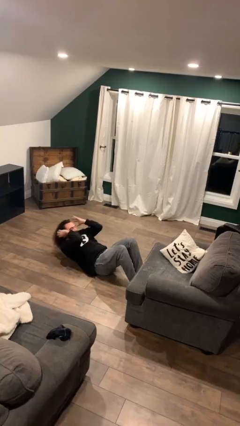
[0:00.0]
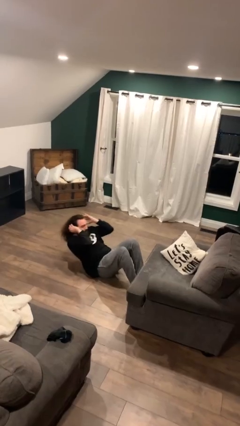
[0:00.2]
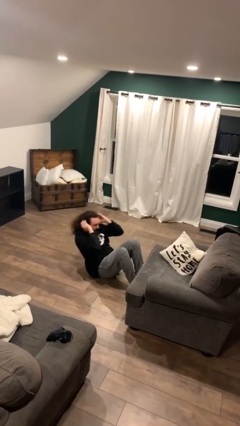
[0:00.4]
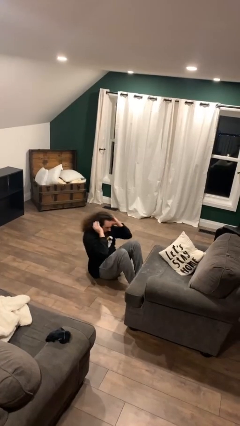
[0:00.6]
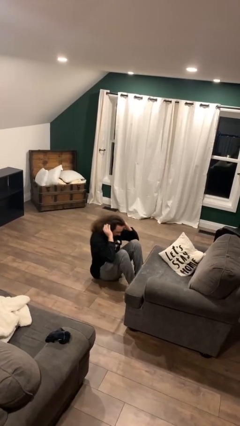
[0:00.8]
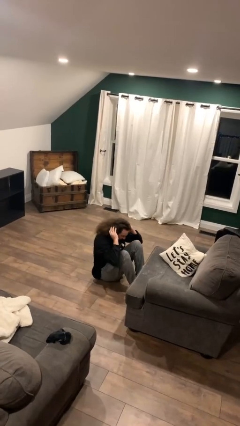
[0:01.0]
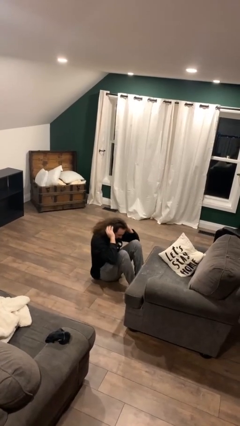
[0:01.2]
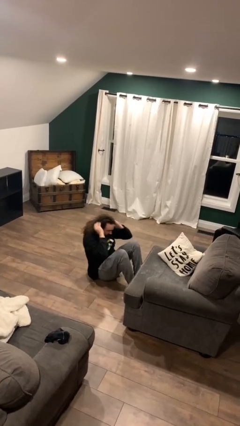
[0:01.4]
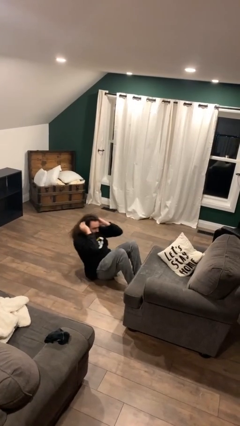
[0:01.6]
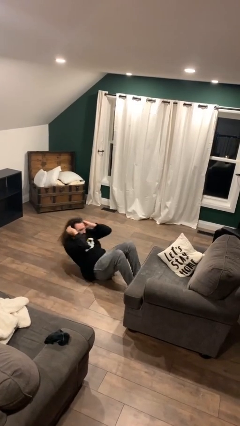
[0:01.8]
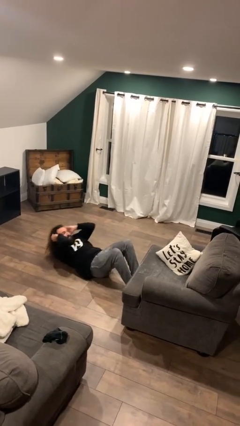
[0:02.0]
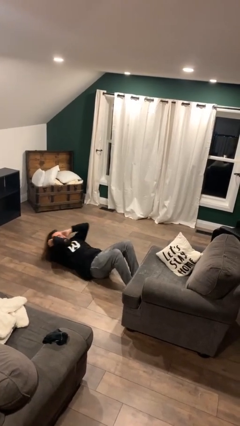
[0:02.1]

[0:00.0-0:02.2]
person exercises with situp

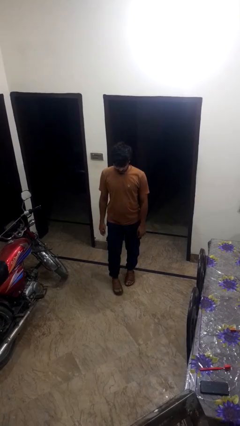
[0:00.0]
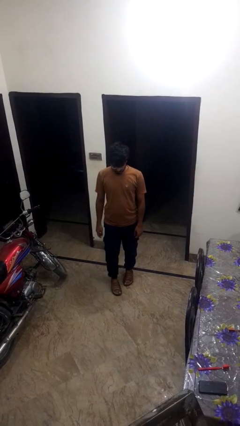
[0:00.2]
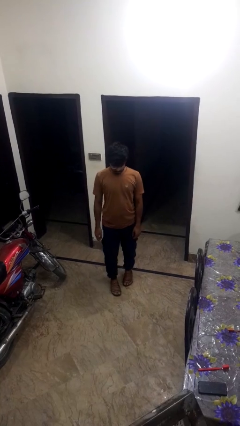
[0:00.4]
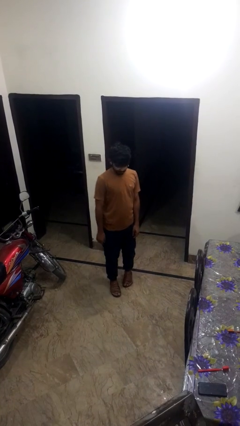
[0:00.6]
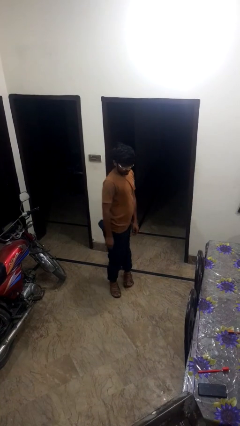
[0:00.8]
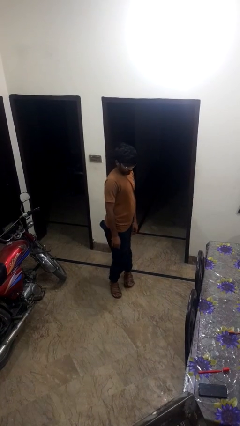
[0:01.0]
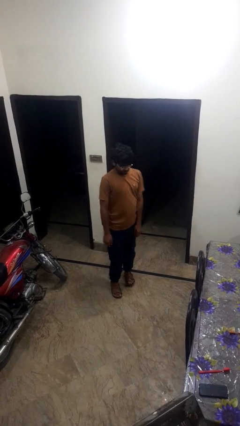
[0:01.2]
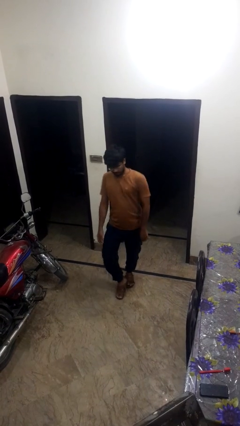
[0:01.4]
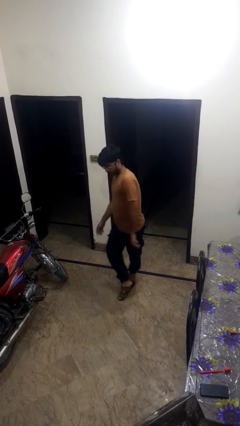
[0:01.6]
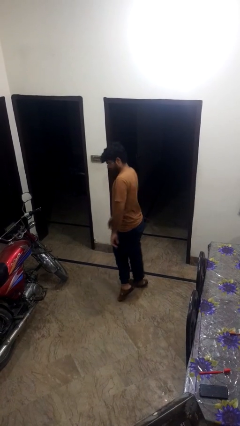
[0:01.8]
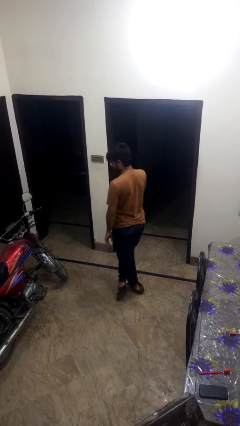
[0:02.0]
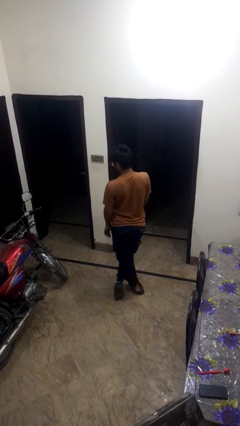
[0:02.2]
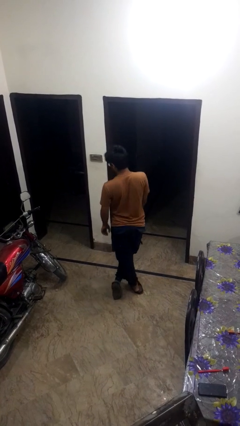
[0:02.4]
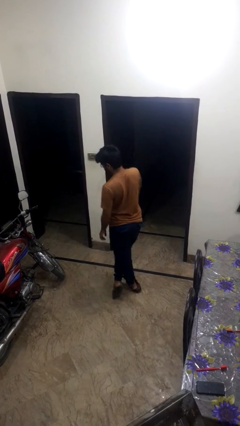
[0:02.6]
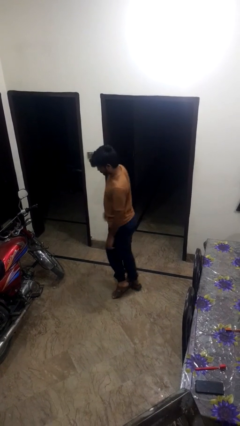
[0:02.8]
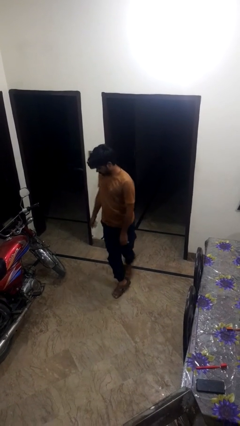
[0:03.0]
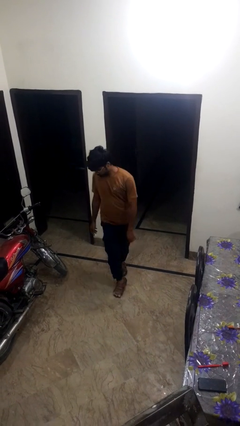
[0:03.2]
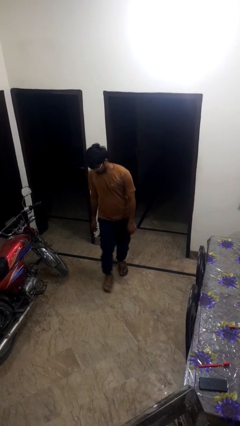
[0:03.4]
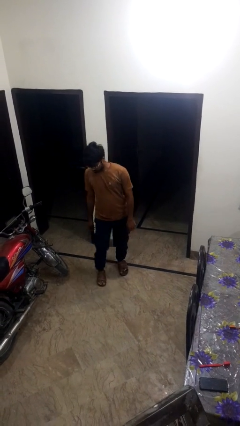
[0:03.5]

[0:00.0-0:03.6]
person twirls

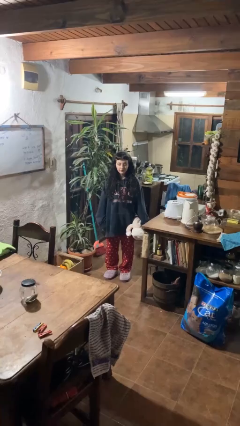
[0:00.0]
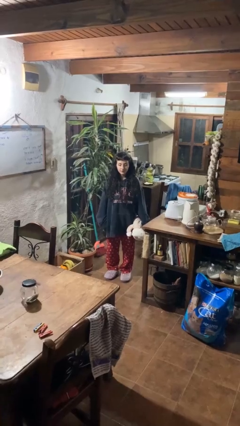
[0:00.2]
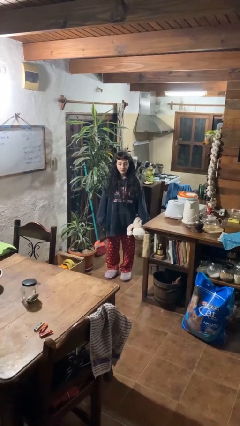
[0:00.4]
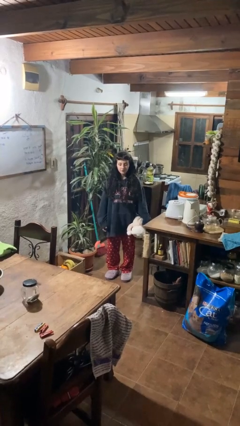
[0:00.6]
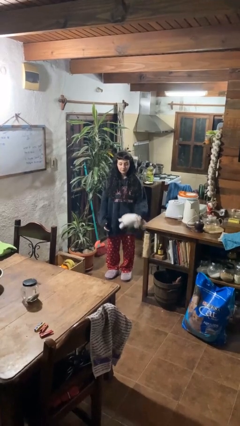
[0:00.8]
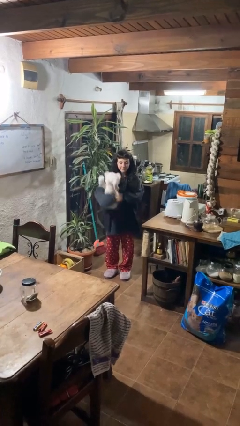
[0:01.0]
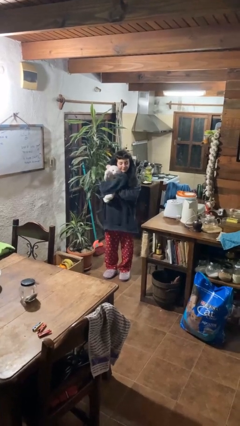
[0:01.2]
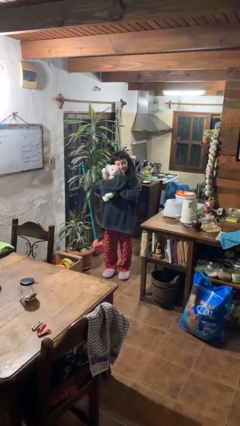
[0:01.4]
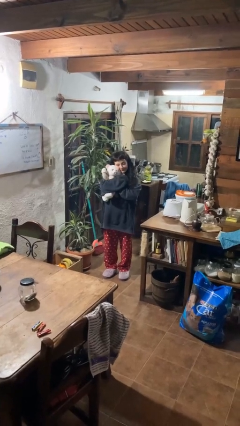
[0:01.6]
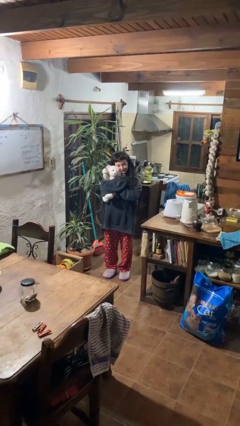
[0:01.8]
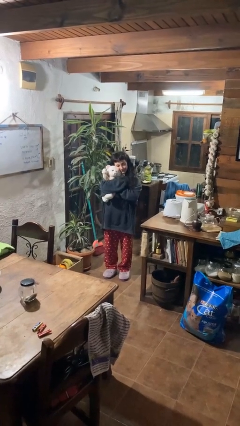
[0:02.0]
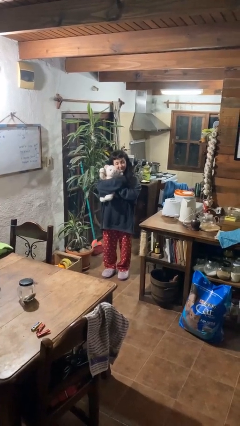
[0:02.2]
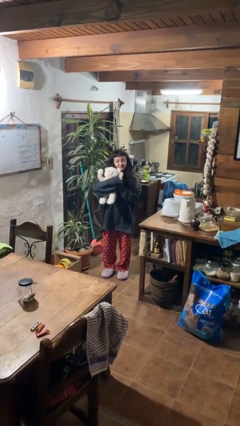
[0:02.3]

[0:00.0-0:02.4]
person hugs stuffed animal

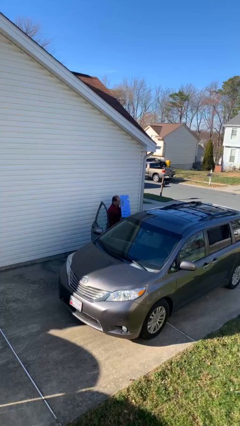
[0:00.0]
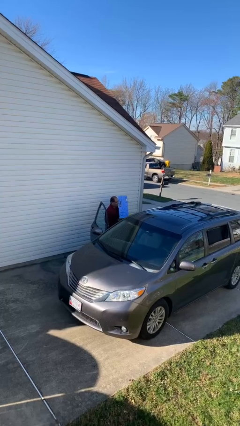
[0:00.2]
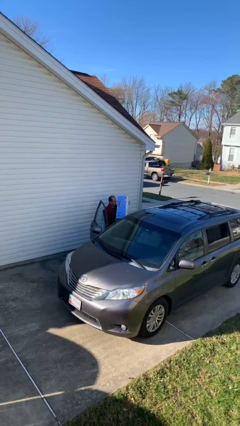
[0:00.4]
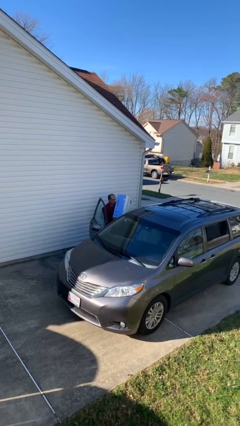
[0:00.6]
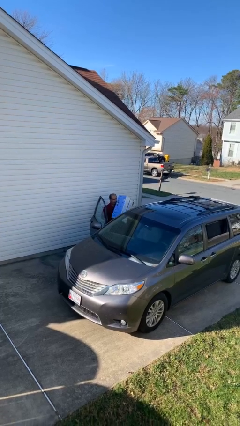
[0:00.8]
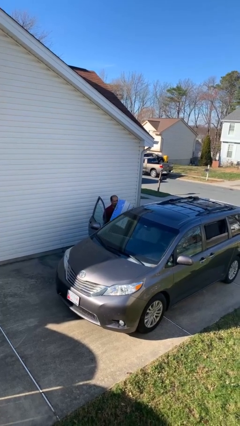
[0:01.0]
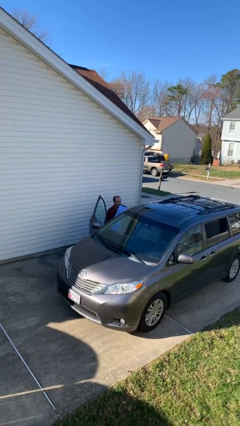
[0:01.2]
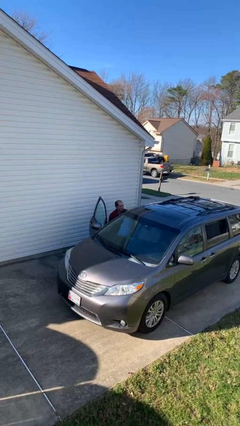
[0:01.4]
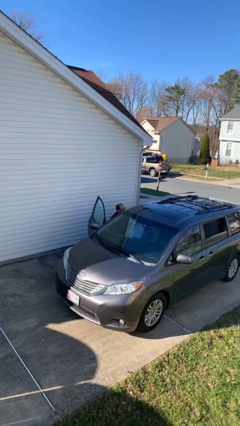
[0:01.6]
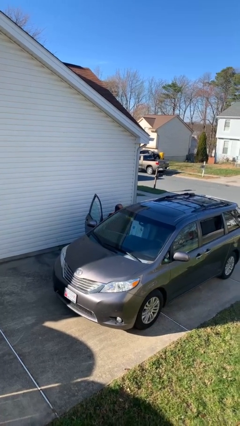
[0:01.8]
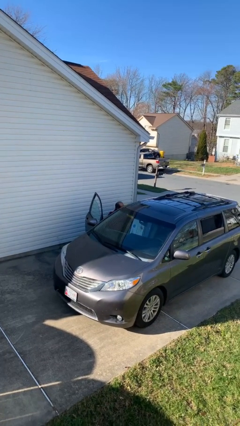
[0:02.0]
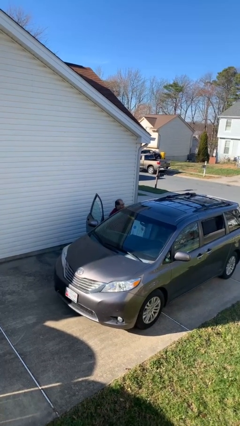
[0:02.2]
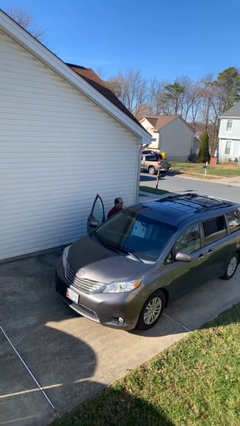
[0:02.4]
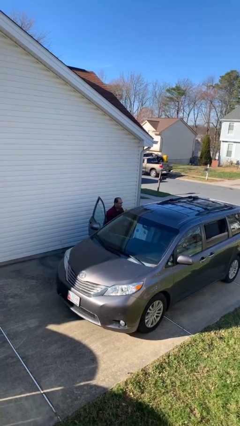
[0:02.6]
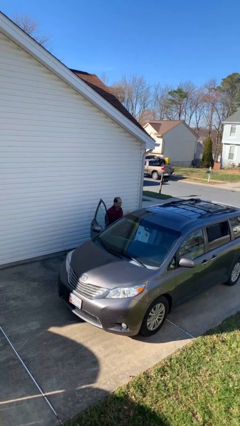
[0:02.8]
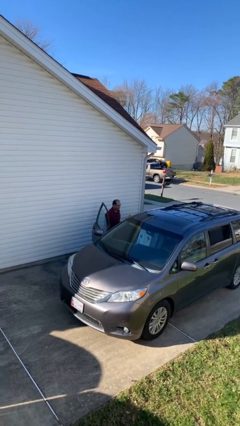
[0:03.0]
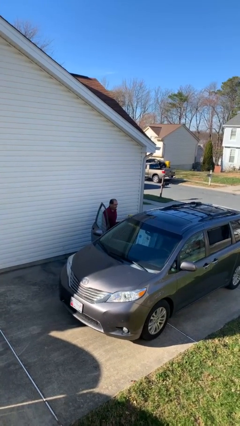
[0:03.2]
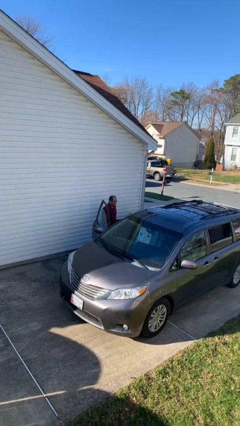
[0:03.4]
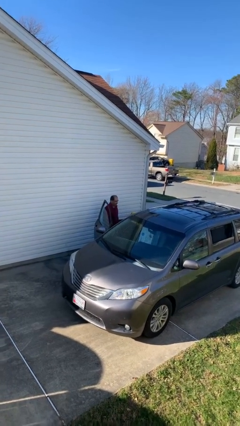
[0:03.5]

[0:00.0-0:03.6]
person loads car

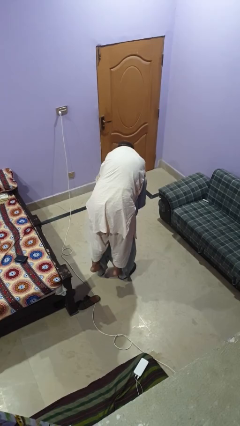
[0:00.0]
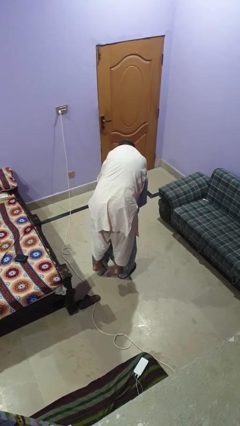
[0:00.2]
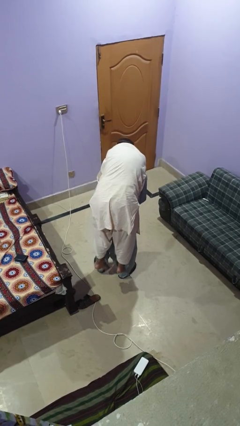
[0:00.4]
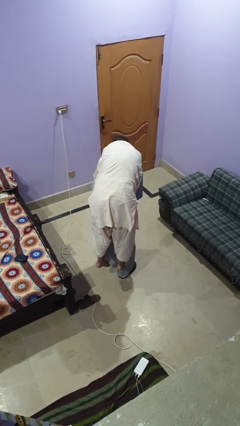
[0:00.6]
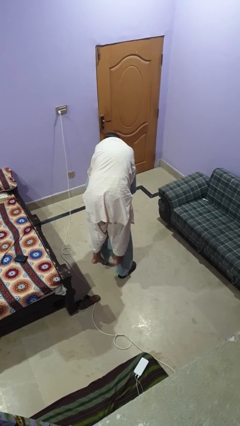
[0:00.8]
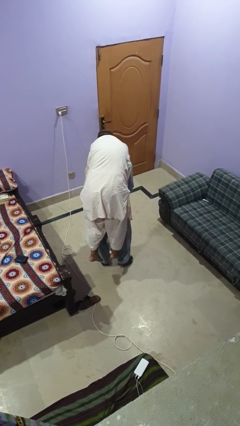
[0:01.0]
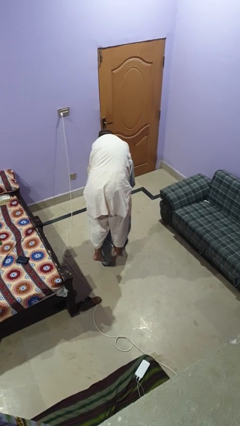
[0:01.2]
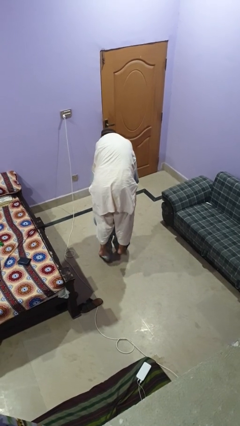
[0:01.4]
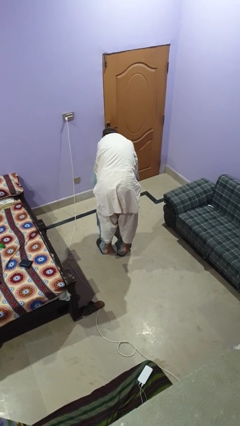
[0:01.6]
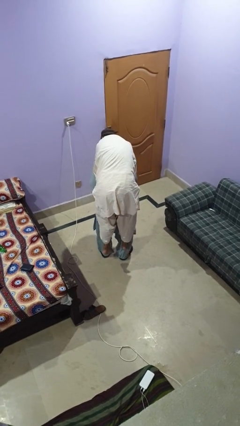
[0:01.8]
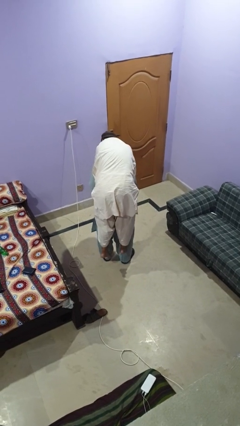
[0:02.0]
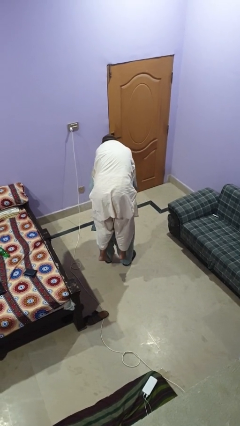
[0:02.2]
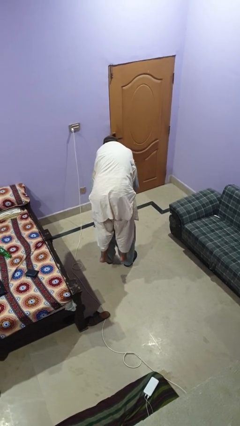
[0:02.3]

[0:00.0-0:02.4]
person carries person on back

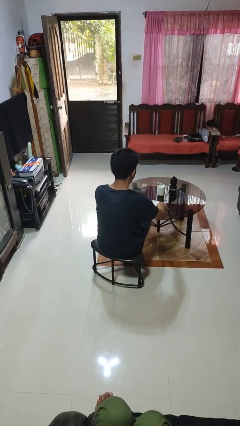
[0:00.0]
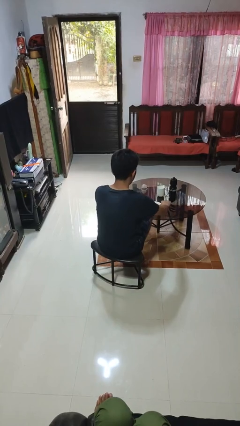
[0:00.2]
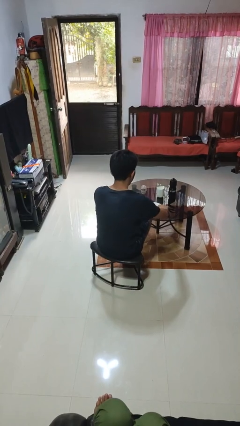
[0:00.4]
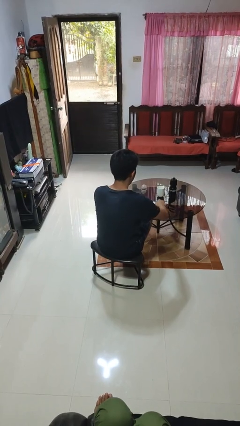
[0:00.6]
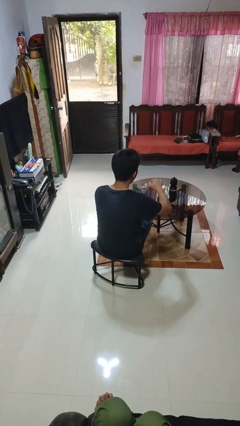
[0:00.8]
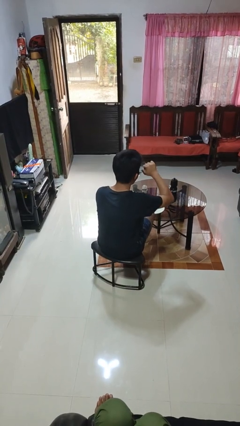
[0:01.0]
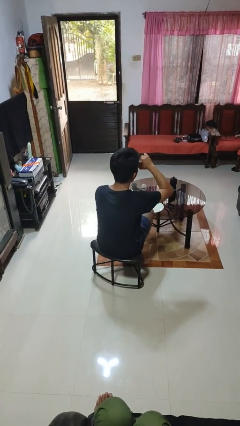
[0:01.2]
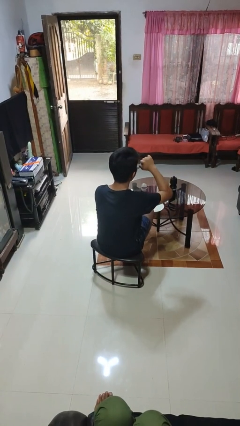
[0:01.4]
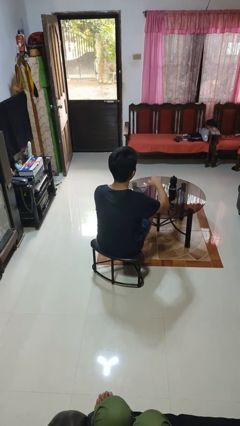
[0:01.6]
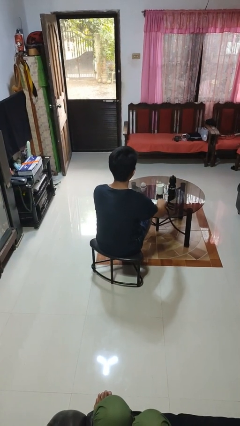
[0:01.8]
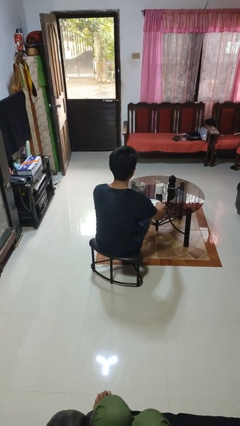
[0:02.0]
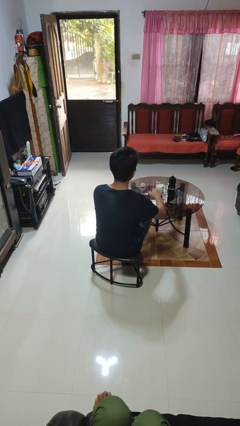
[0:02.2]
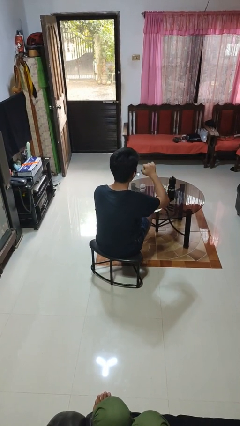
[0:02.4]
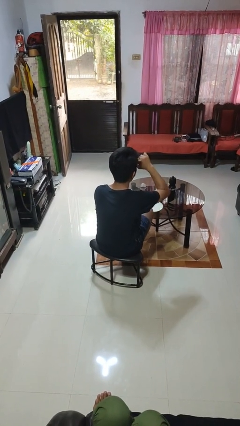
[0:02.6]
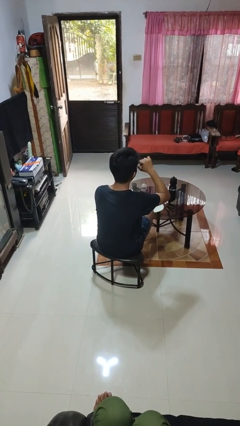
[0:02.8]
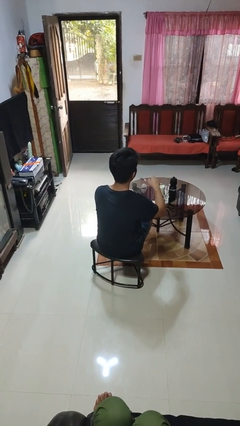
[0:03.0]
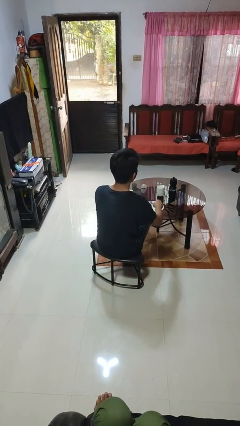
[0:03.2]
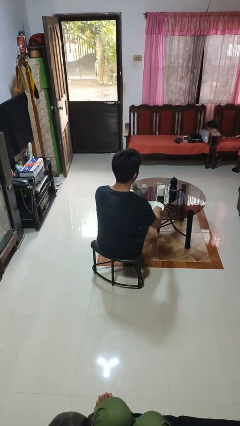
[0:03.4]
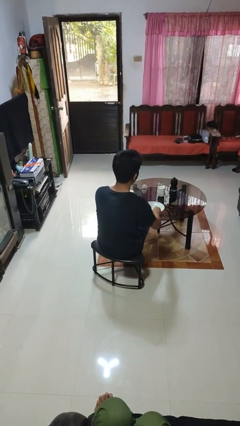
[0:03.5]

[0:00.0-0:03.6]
person eats with utensil
